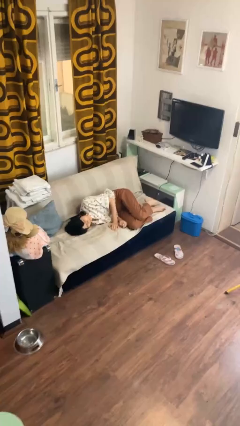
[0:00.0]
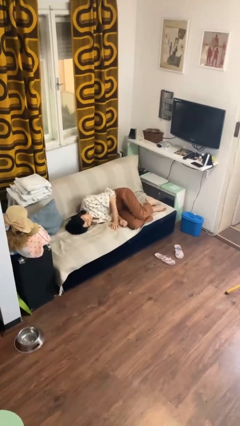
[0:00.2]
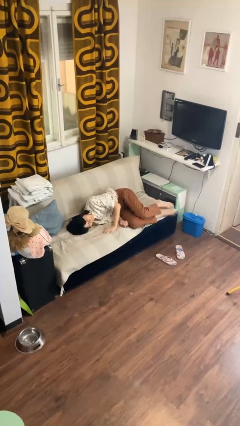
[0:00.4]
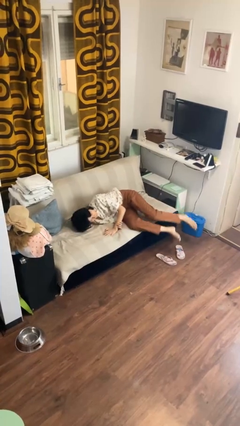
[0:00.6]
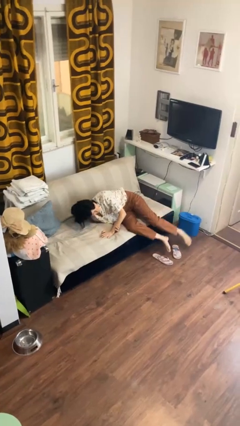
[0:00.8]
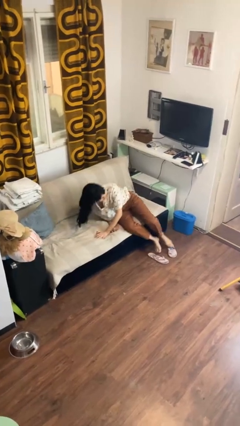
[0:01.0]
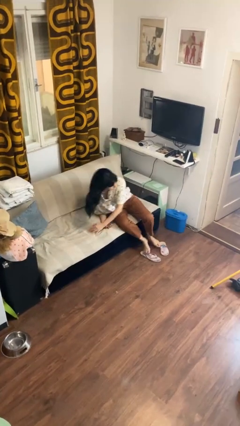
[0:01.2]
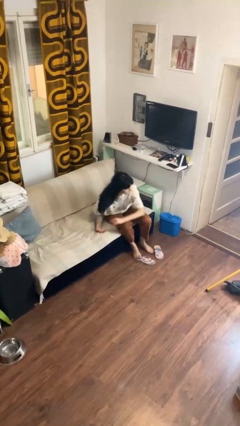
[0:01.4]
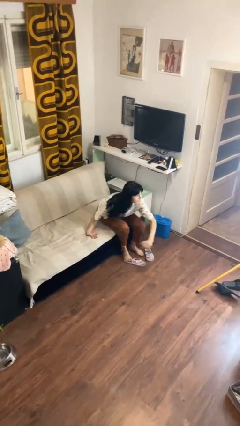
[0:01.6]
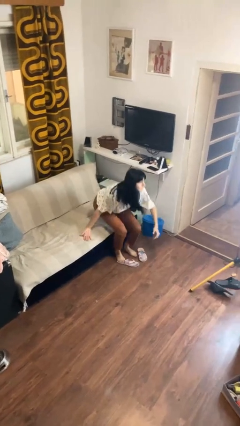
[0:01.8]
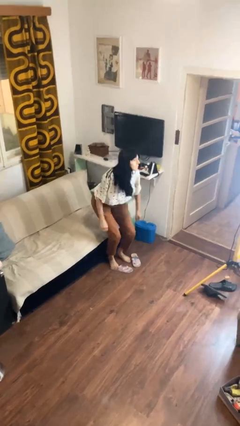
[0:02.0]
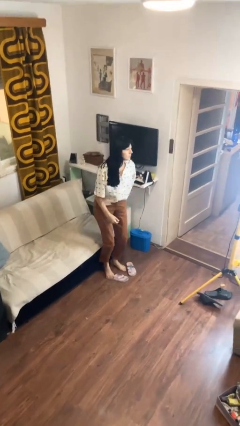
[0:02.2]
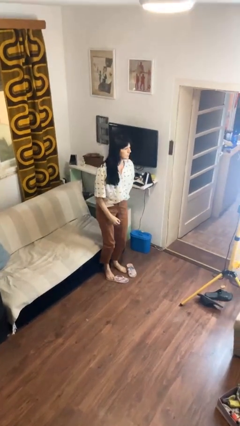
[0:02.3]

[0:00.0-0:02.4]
person stands up

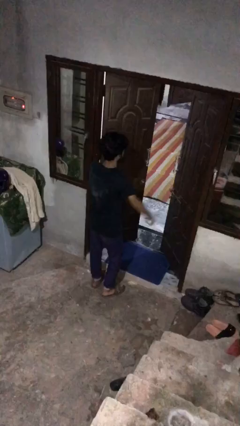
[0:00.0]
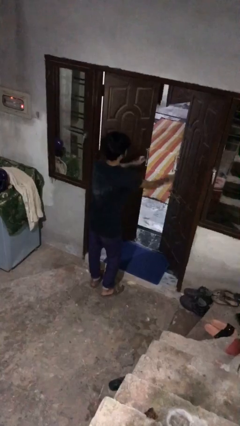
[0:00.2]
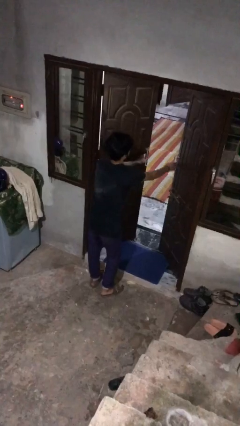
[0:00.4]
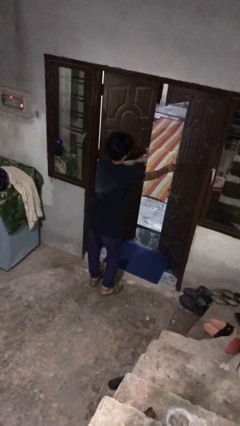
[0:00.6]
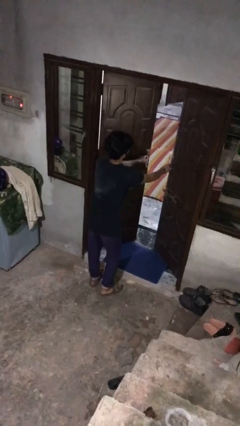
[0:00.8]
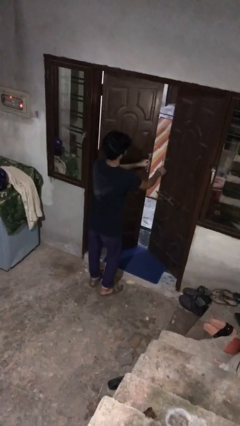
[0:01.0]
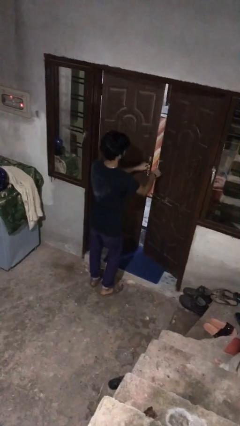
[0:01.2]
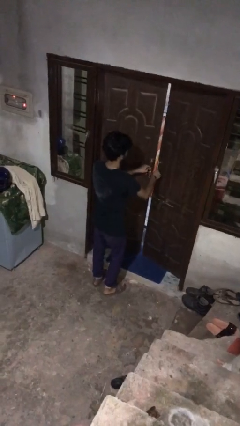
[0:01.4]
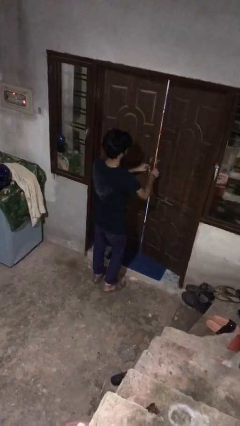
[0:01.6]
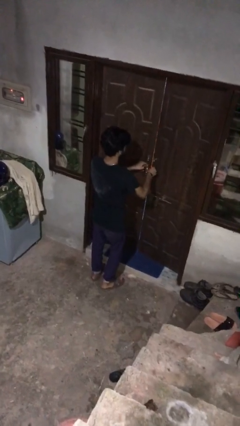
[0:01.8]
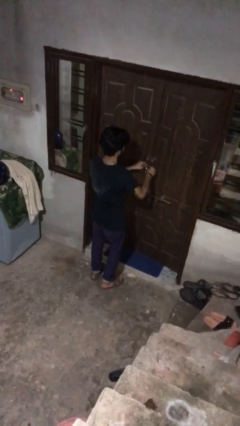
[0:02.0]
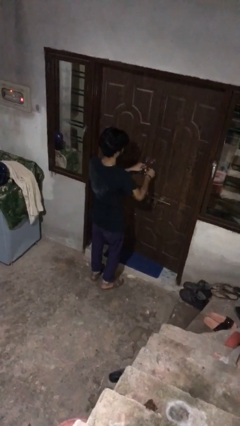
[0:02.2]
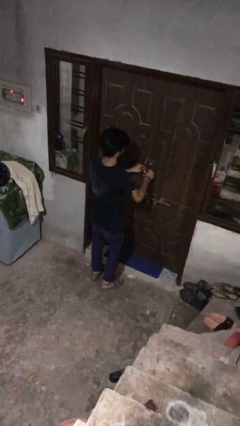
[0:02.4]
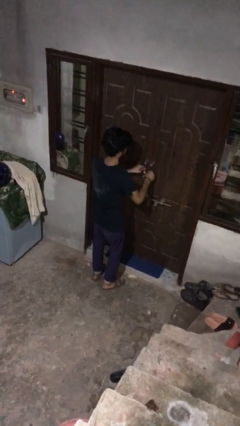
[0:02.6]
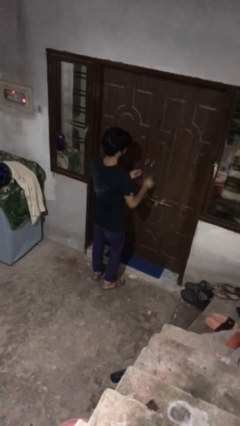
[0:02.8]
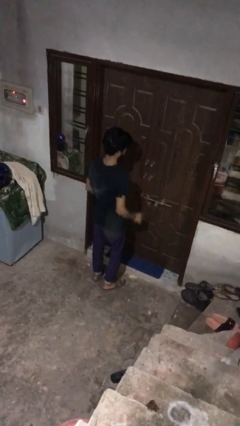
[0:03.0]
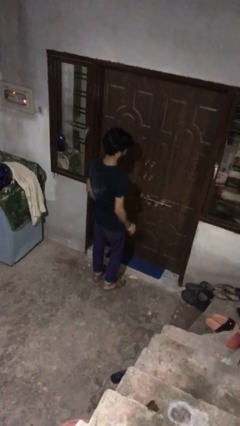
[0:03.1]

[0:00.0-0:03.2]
person closes facility door

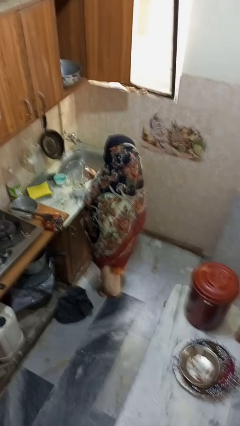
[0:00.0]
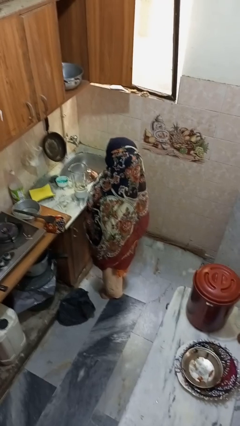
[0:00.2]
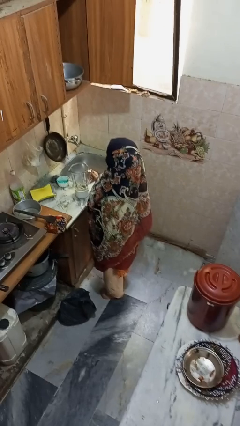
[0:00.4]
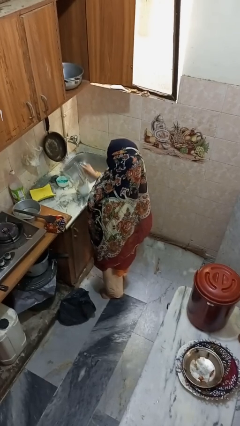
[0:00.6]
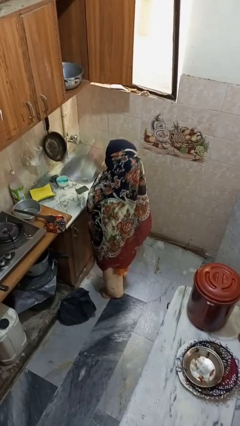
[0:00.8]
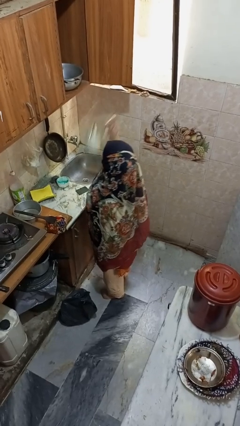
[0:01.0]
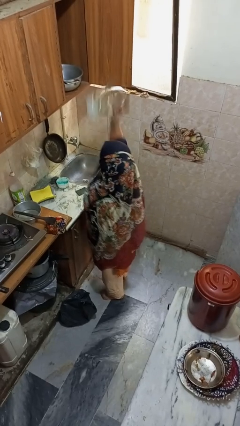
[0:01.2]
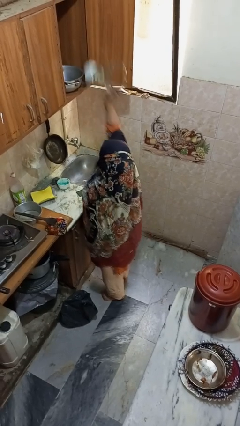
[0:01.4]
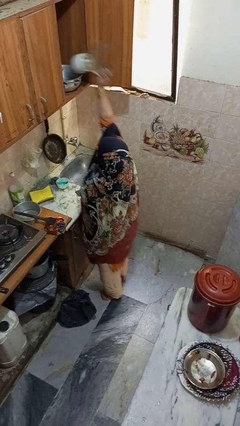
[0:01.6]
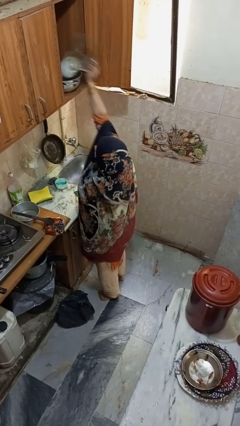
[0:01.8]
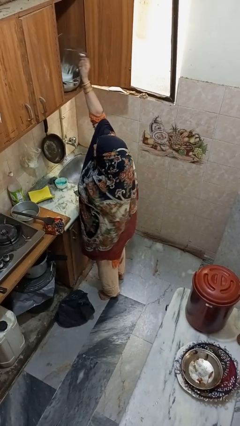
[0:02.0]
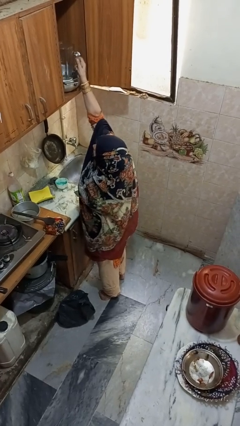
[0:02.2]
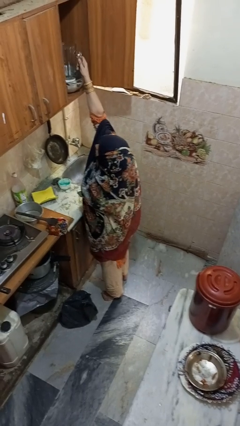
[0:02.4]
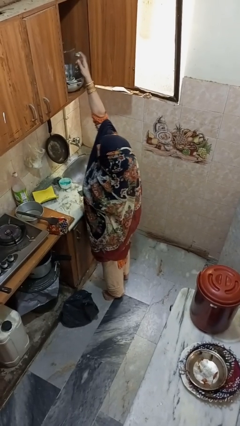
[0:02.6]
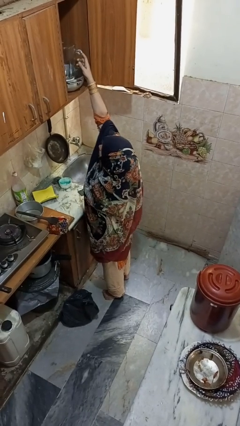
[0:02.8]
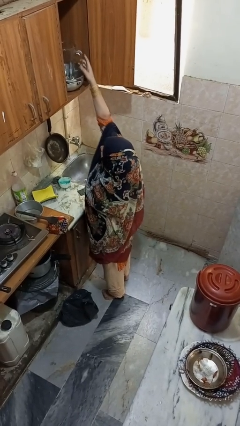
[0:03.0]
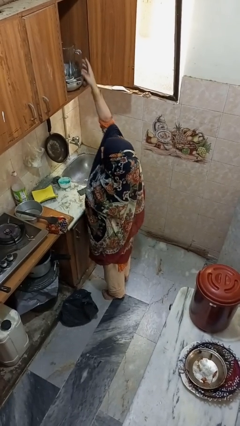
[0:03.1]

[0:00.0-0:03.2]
person takes object from cabinet

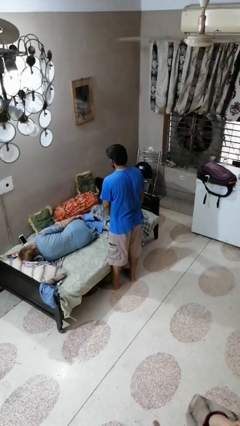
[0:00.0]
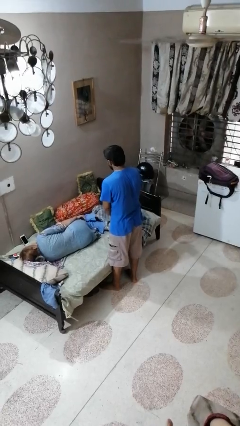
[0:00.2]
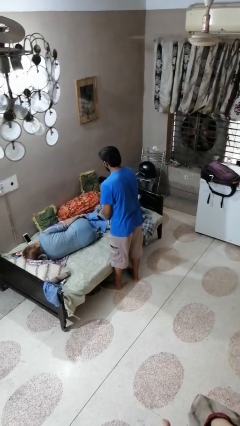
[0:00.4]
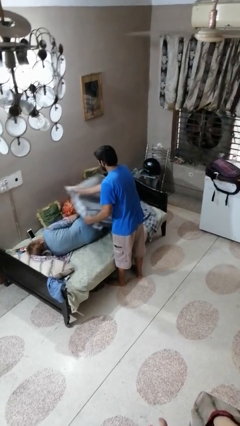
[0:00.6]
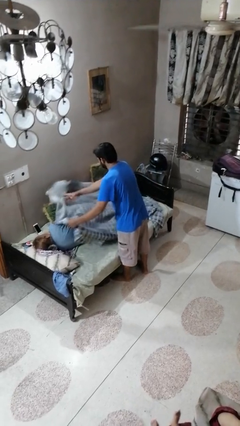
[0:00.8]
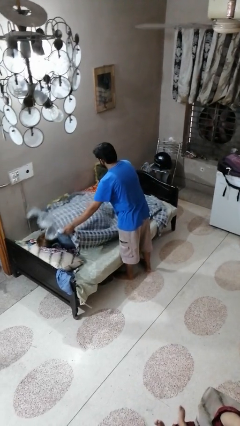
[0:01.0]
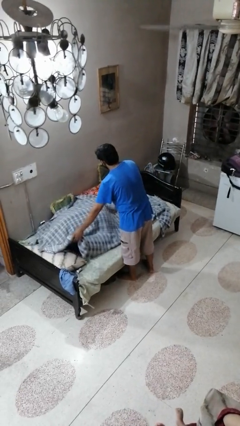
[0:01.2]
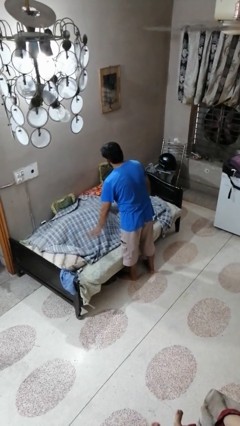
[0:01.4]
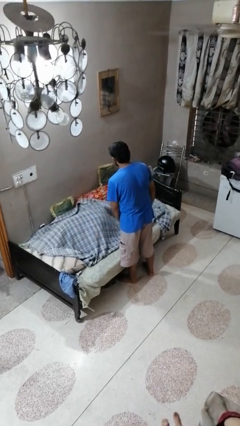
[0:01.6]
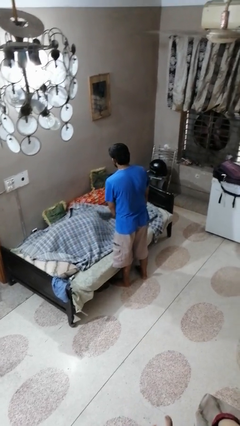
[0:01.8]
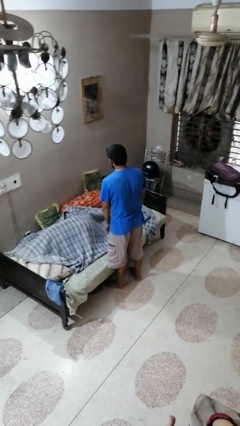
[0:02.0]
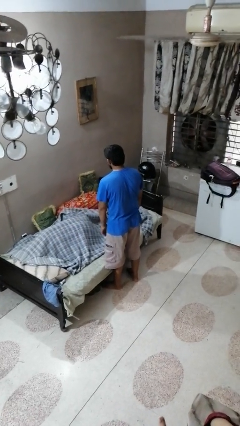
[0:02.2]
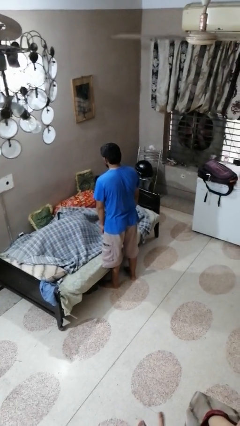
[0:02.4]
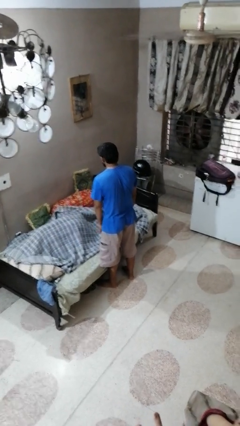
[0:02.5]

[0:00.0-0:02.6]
person covers friend with blanket

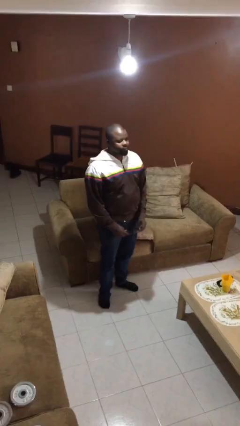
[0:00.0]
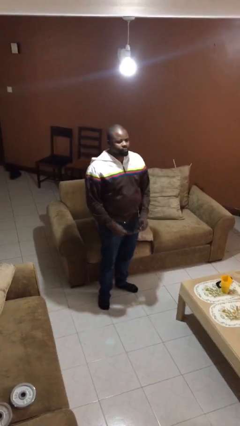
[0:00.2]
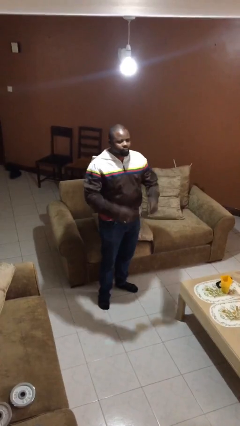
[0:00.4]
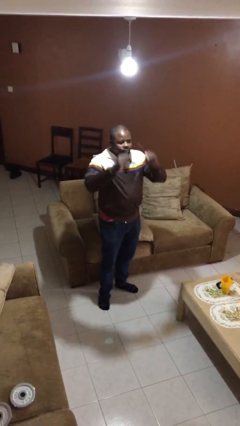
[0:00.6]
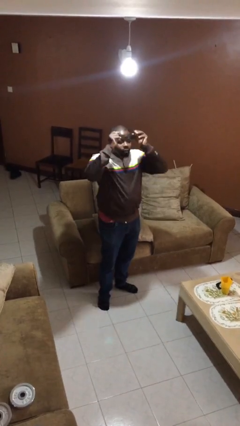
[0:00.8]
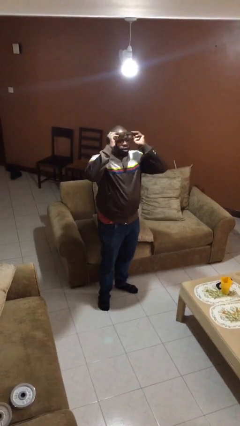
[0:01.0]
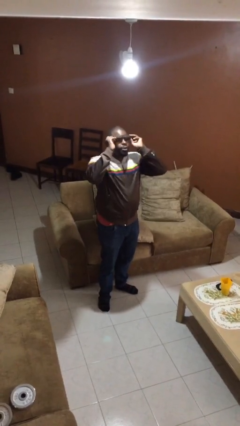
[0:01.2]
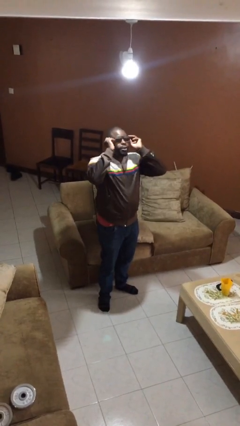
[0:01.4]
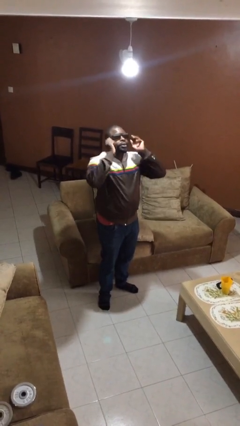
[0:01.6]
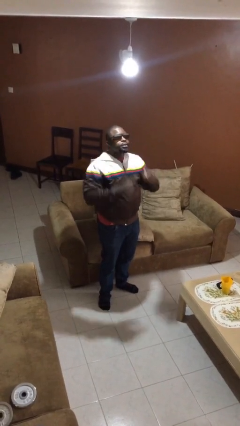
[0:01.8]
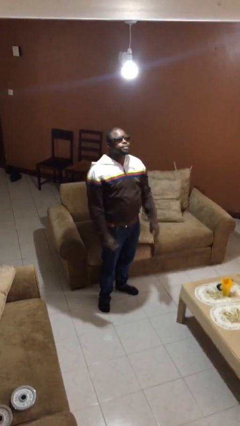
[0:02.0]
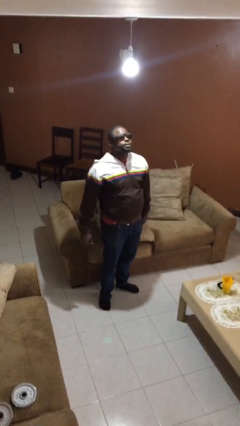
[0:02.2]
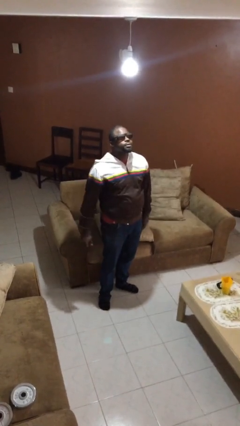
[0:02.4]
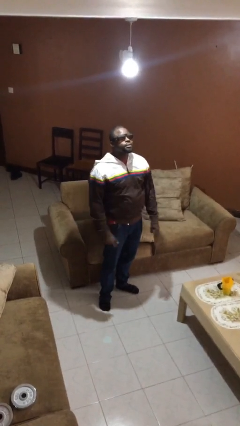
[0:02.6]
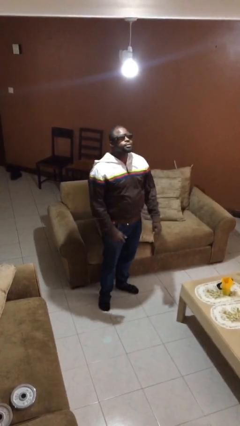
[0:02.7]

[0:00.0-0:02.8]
person puts on sunglasses

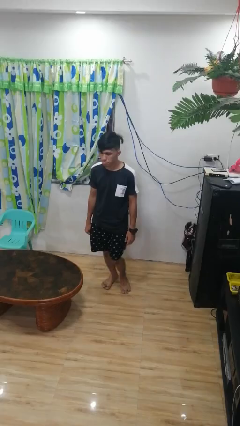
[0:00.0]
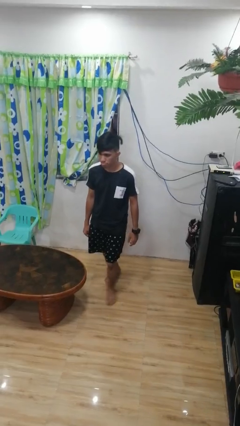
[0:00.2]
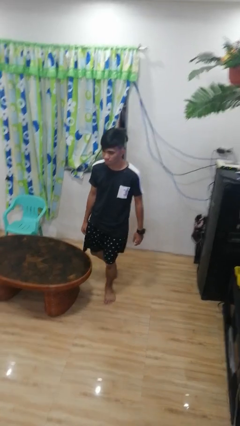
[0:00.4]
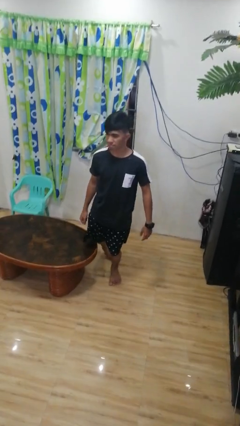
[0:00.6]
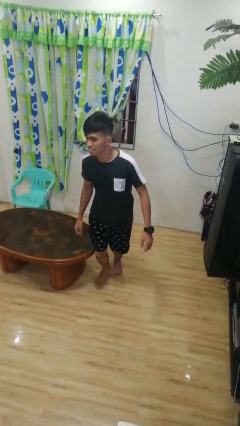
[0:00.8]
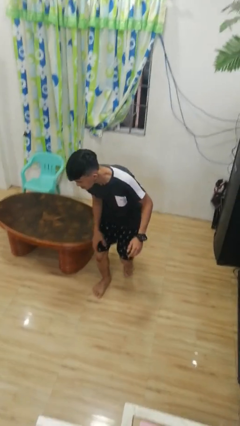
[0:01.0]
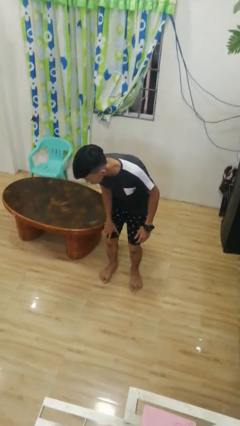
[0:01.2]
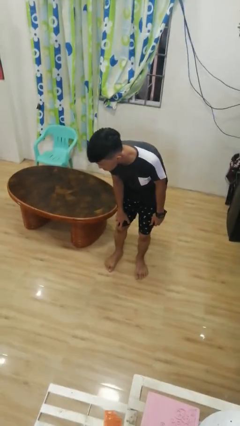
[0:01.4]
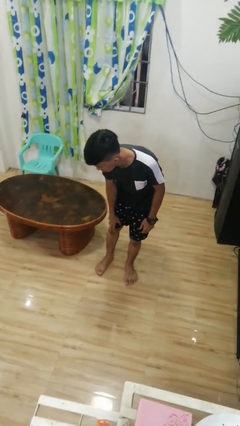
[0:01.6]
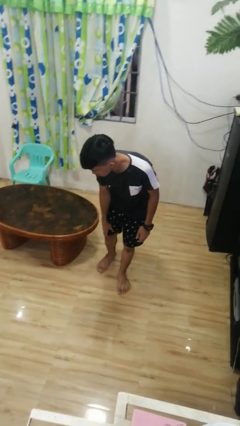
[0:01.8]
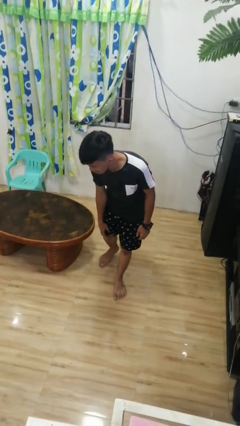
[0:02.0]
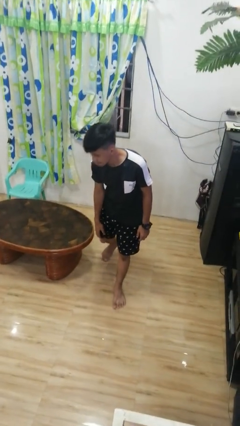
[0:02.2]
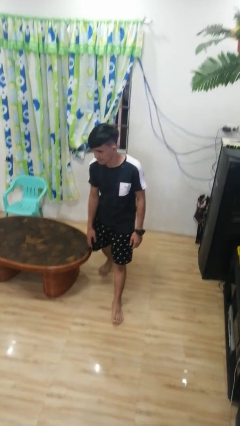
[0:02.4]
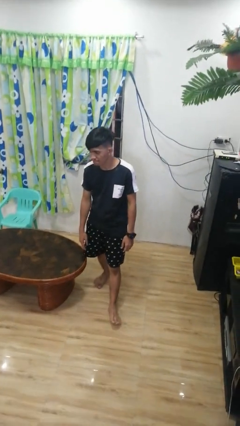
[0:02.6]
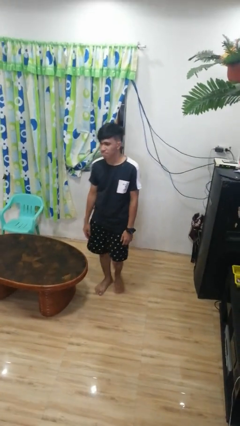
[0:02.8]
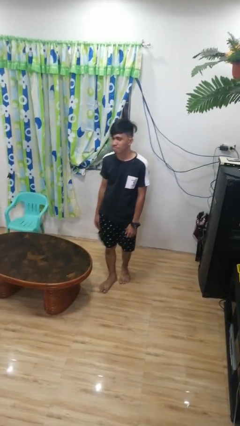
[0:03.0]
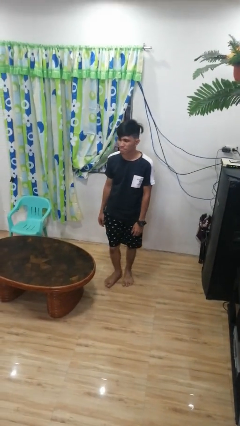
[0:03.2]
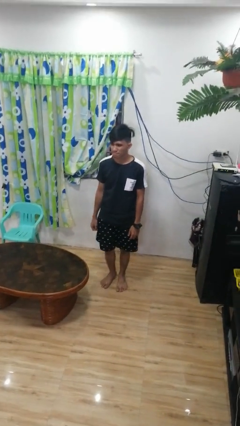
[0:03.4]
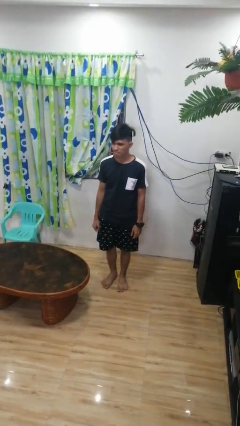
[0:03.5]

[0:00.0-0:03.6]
person bumps into table
